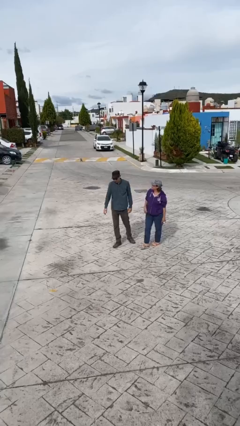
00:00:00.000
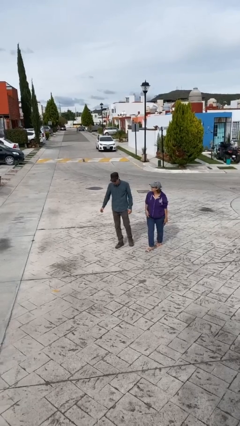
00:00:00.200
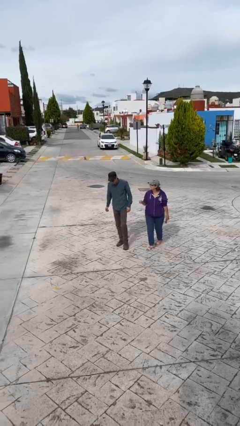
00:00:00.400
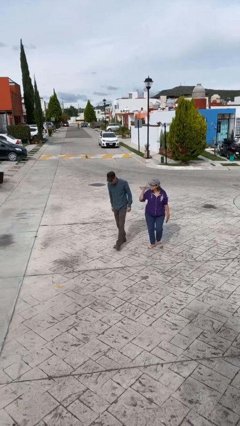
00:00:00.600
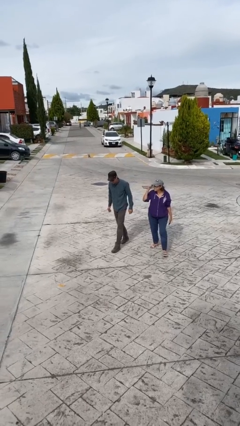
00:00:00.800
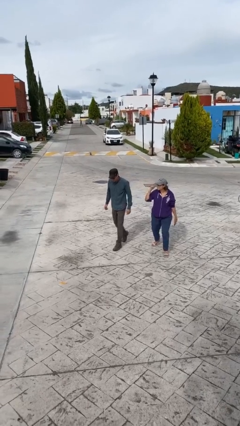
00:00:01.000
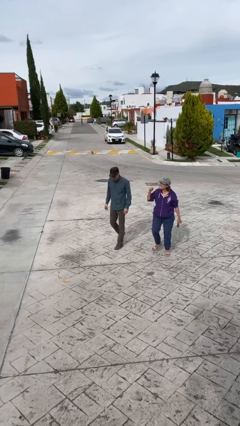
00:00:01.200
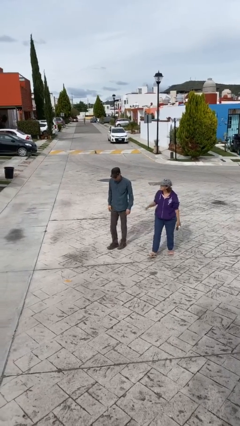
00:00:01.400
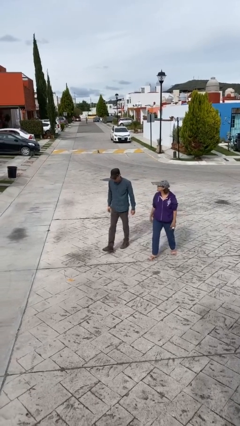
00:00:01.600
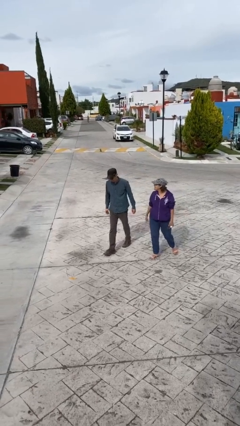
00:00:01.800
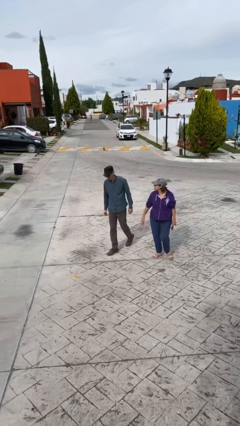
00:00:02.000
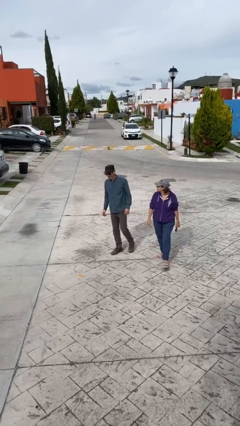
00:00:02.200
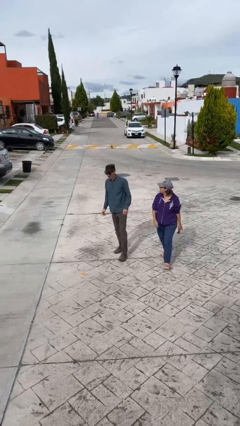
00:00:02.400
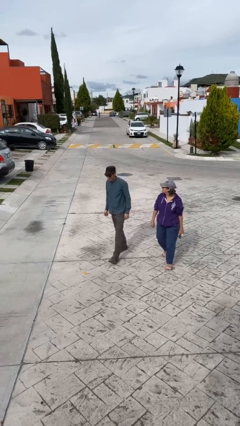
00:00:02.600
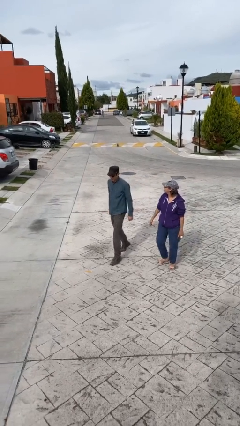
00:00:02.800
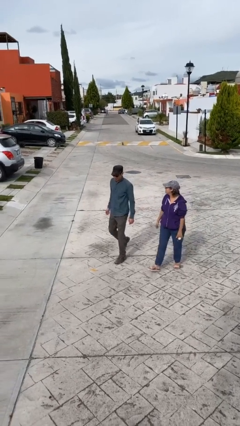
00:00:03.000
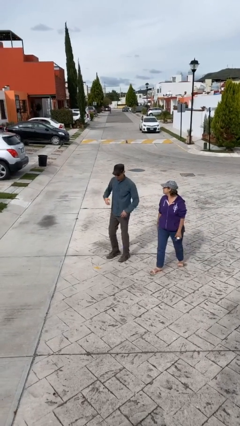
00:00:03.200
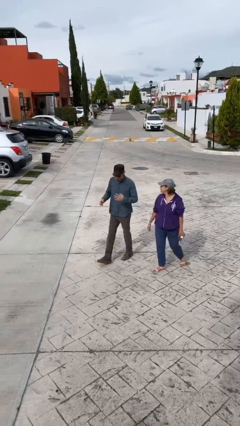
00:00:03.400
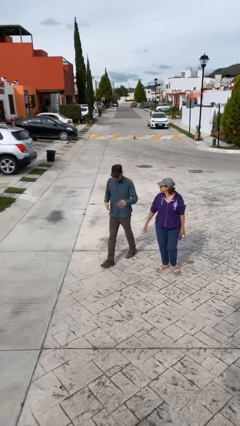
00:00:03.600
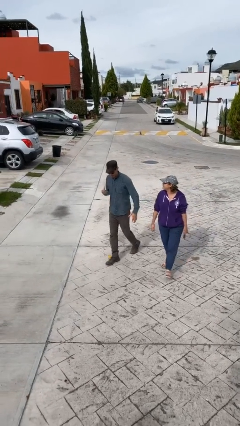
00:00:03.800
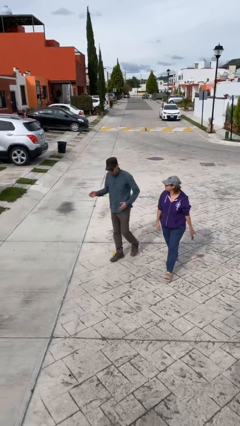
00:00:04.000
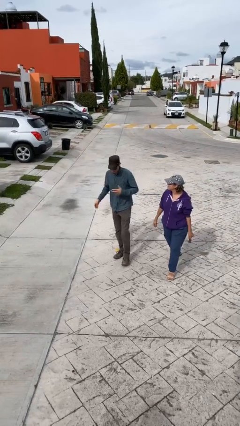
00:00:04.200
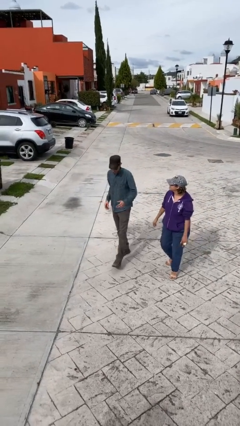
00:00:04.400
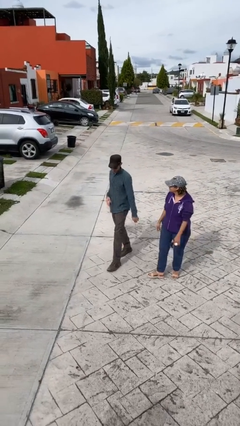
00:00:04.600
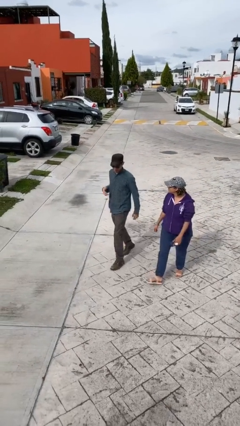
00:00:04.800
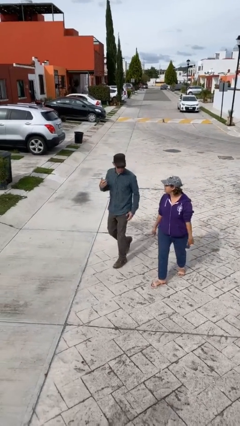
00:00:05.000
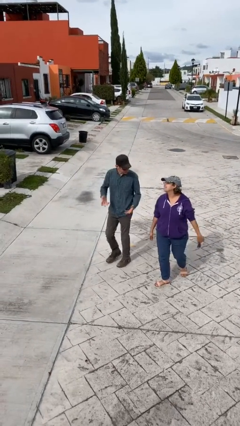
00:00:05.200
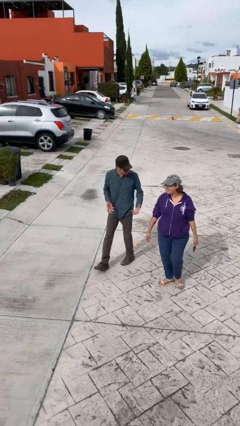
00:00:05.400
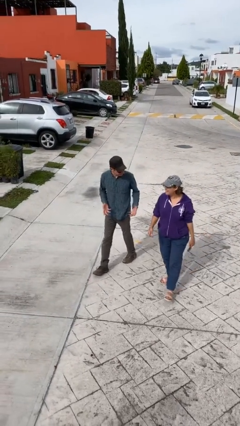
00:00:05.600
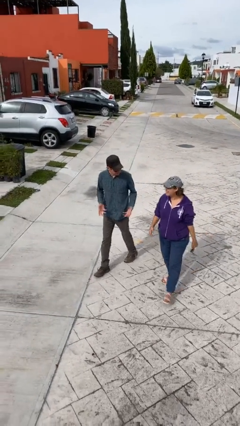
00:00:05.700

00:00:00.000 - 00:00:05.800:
person talks to person

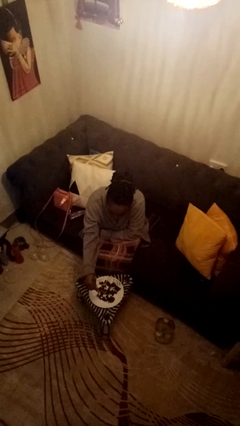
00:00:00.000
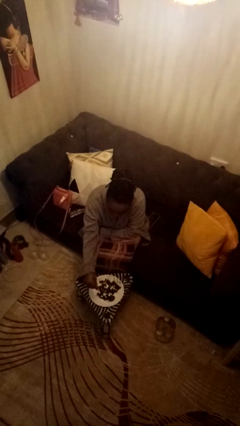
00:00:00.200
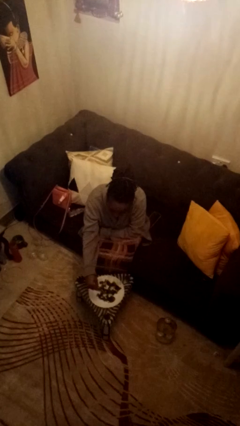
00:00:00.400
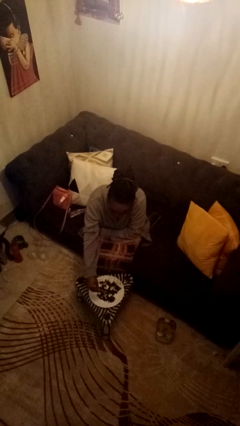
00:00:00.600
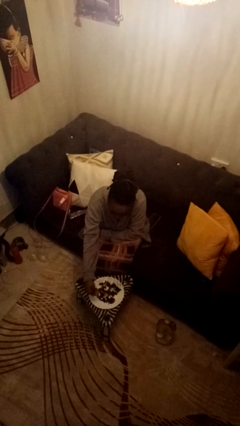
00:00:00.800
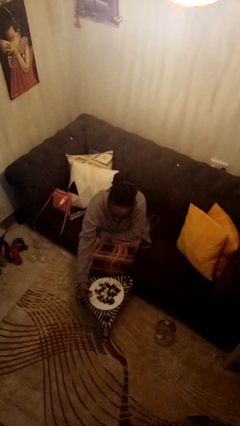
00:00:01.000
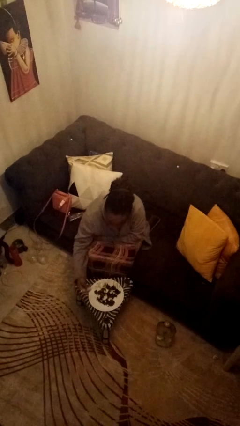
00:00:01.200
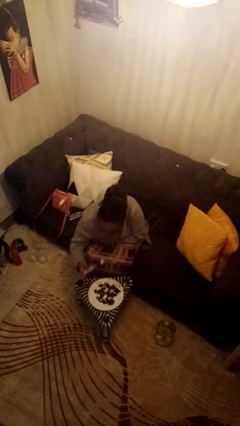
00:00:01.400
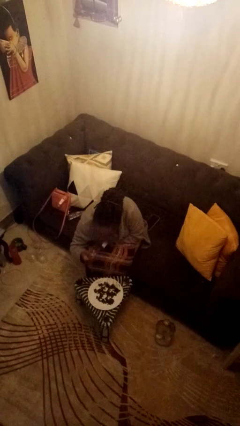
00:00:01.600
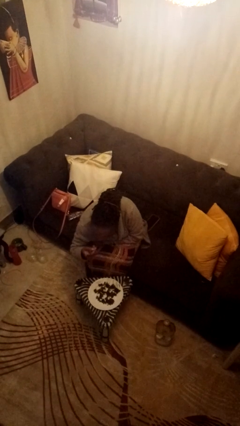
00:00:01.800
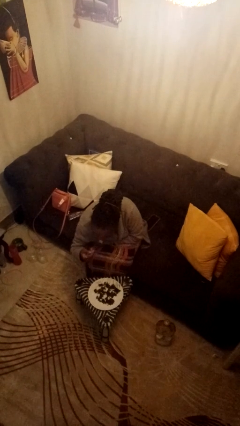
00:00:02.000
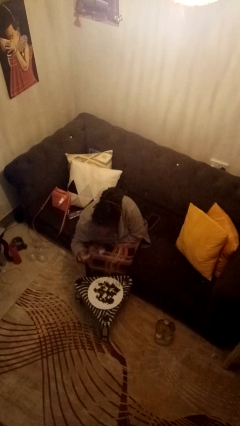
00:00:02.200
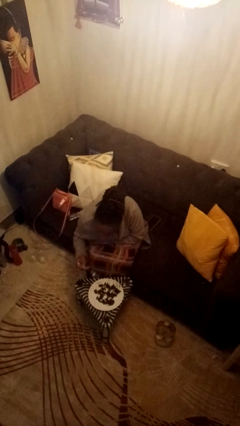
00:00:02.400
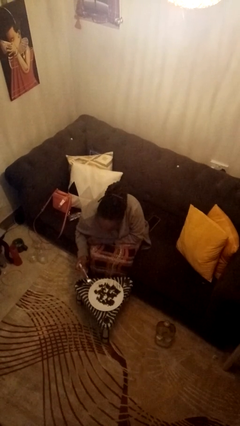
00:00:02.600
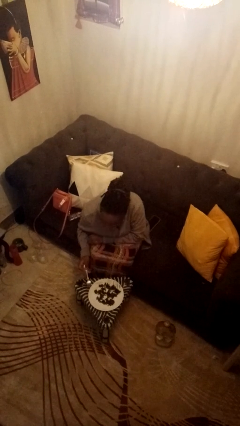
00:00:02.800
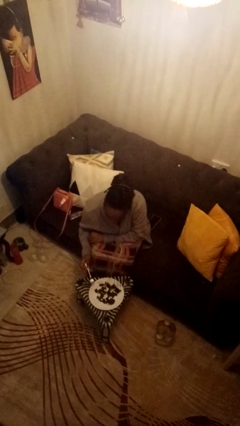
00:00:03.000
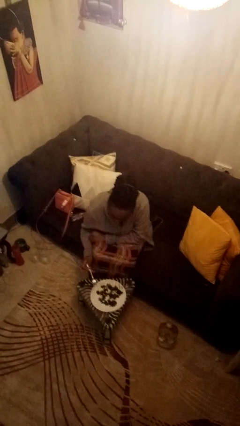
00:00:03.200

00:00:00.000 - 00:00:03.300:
person eats with utensil

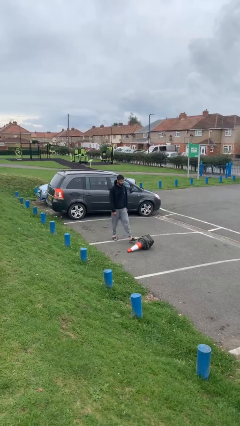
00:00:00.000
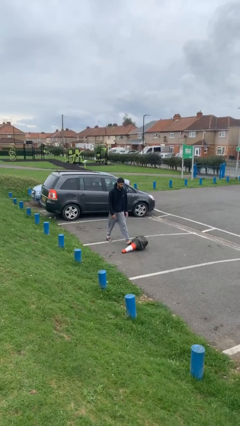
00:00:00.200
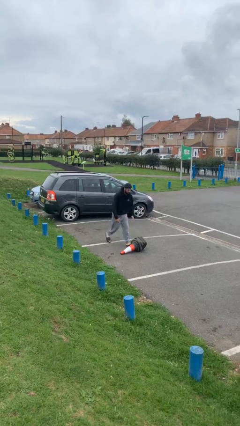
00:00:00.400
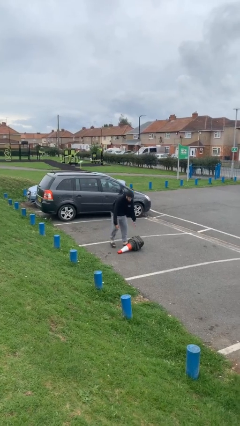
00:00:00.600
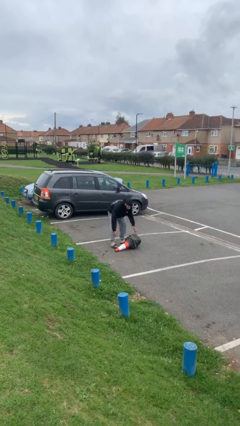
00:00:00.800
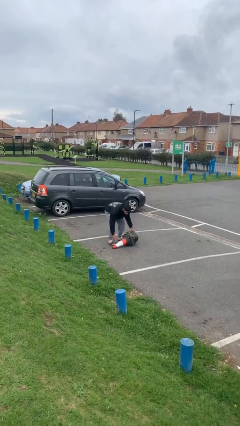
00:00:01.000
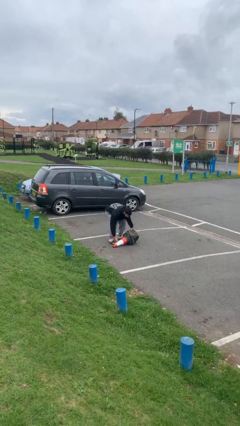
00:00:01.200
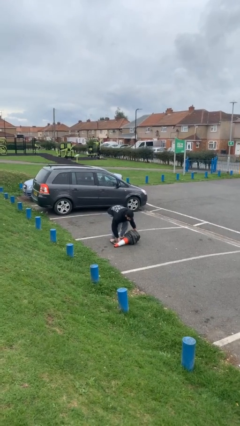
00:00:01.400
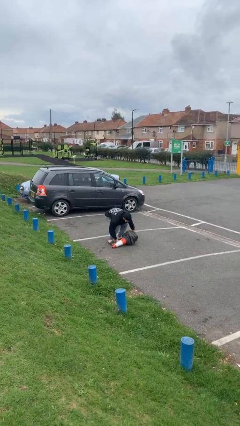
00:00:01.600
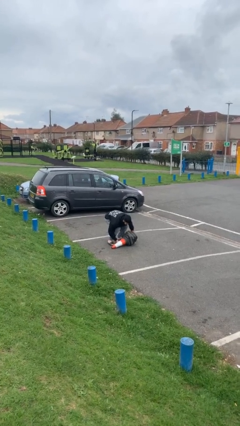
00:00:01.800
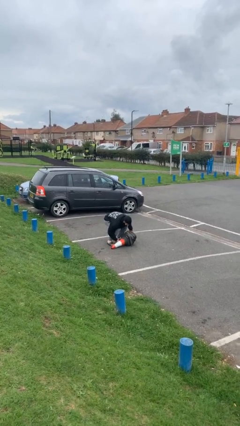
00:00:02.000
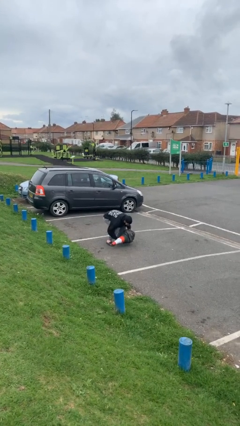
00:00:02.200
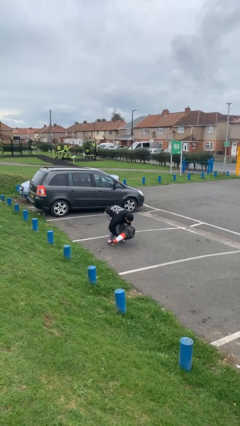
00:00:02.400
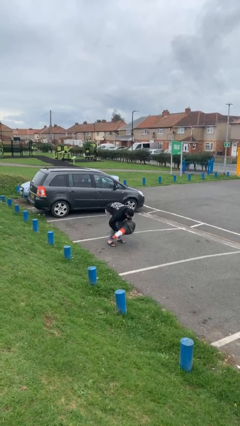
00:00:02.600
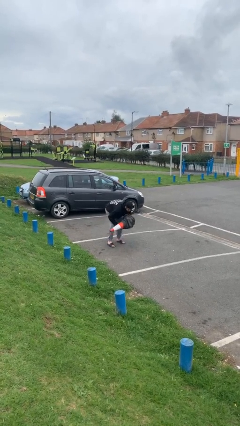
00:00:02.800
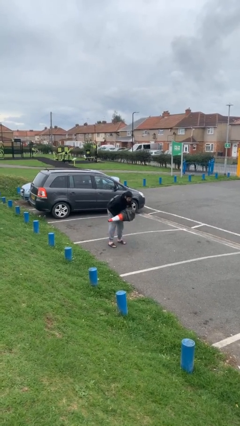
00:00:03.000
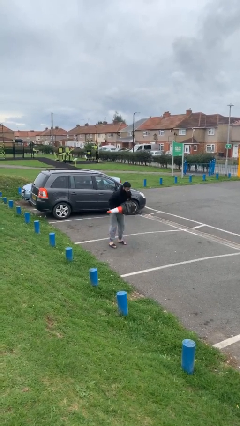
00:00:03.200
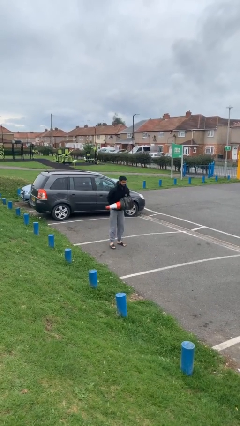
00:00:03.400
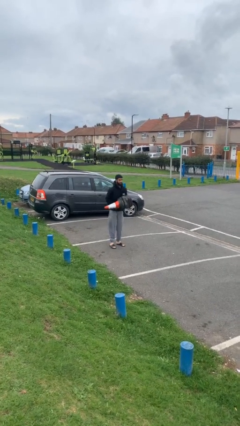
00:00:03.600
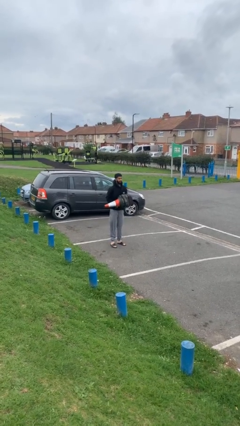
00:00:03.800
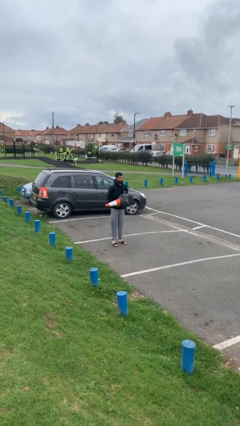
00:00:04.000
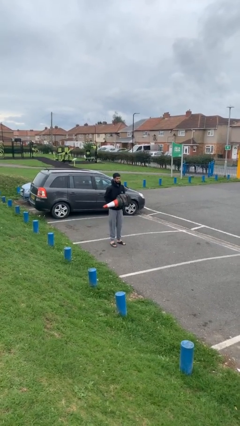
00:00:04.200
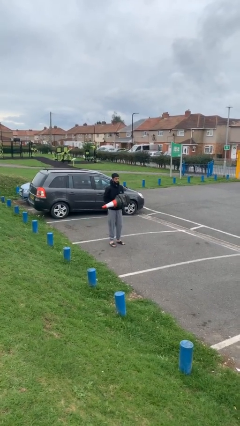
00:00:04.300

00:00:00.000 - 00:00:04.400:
person picks up object from floor

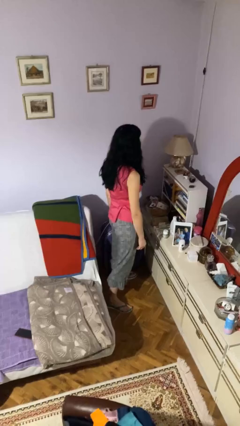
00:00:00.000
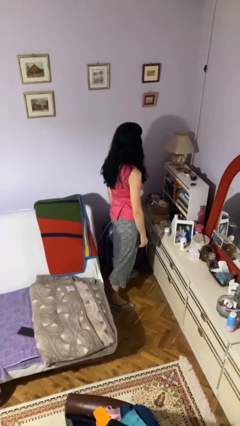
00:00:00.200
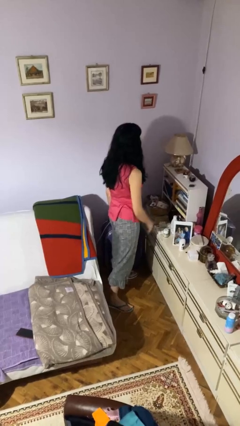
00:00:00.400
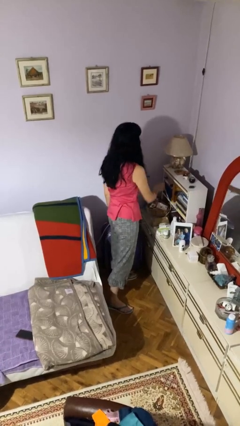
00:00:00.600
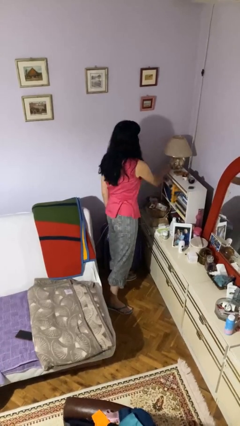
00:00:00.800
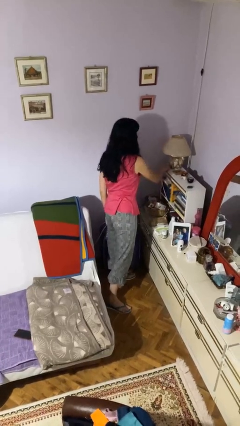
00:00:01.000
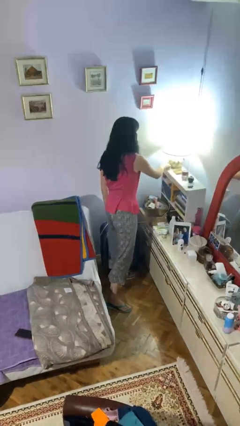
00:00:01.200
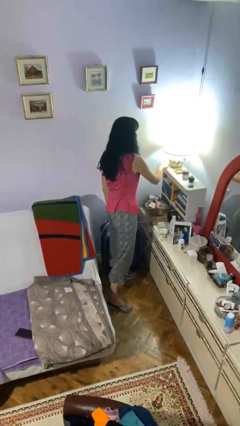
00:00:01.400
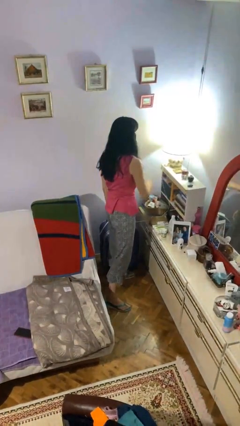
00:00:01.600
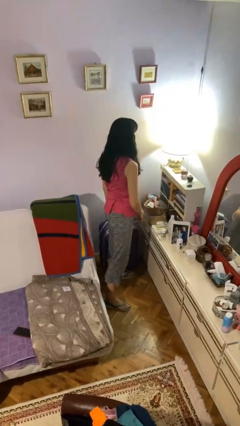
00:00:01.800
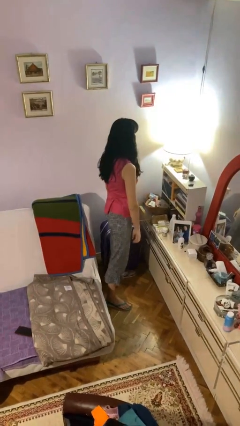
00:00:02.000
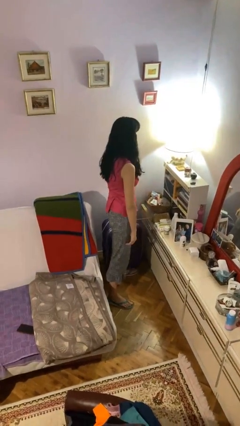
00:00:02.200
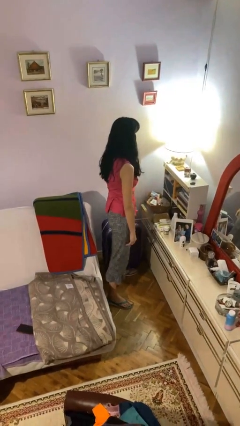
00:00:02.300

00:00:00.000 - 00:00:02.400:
person turns on lamp

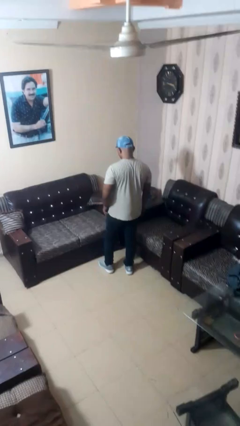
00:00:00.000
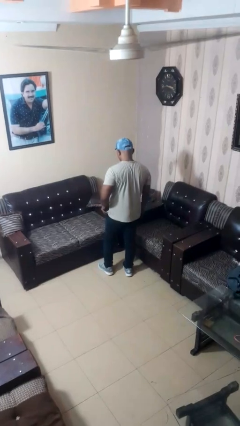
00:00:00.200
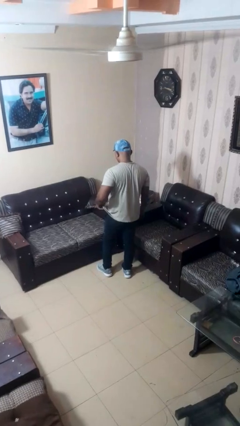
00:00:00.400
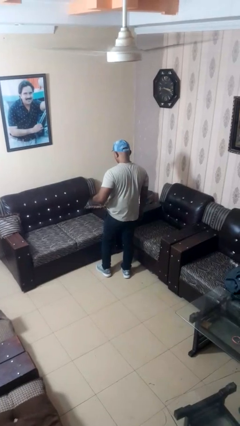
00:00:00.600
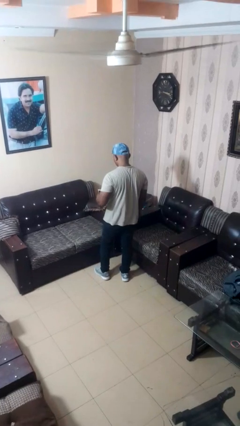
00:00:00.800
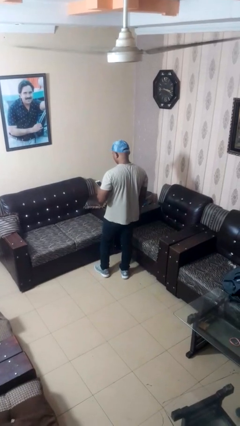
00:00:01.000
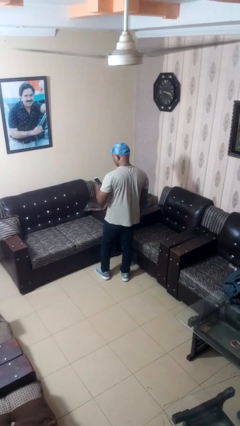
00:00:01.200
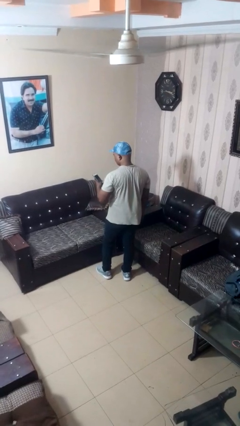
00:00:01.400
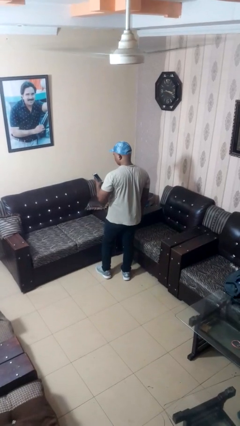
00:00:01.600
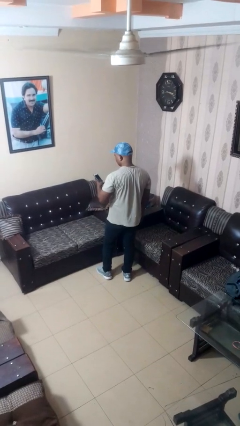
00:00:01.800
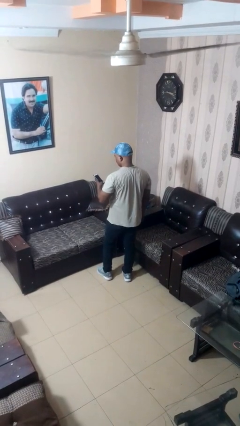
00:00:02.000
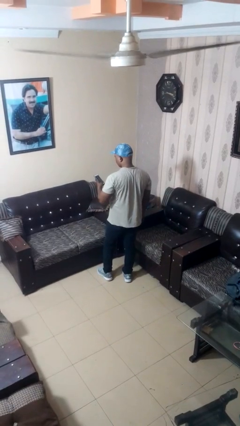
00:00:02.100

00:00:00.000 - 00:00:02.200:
person takes phone from pocket
